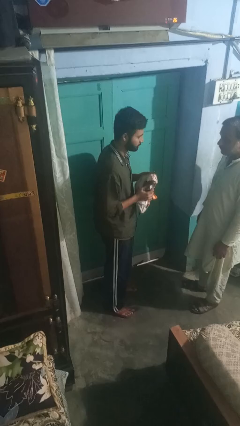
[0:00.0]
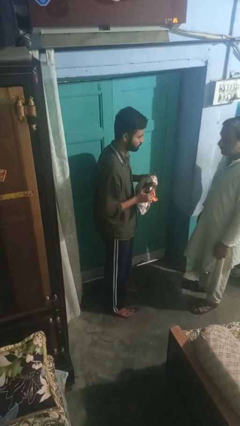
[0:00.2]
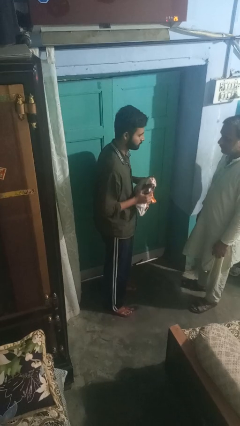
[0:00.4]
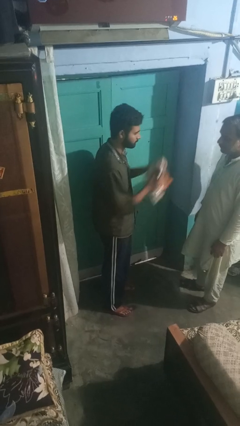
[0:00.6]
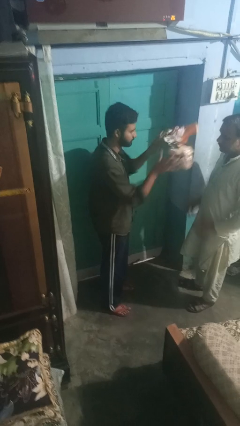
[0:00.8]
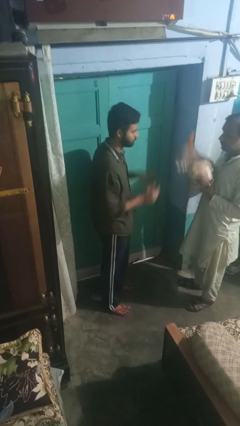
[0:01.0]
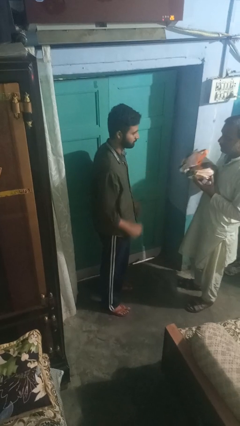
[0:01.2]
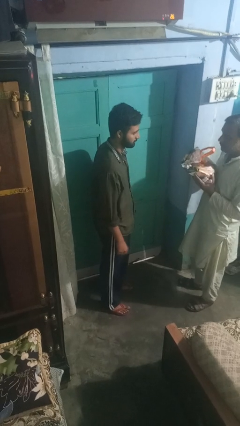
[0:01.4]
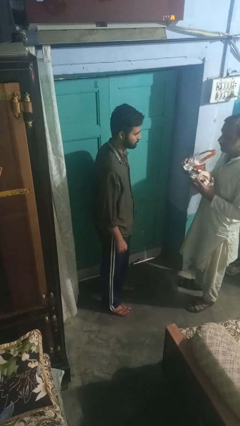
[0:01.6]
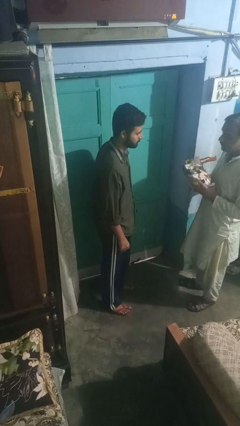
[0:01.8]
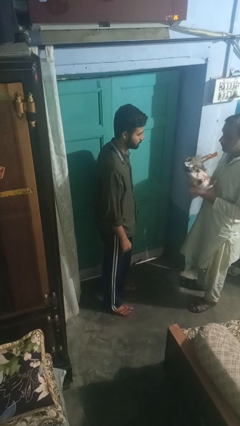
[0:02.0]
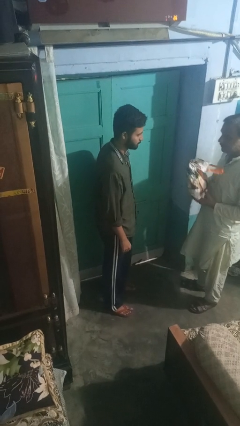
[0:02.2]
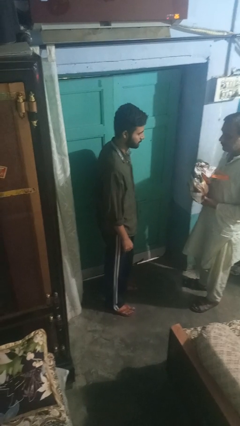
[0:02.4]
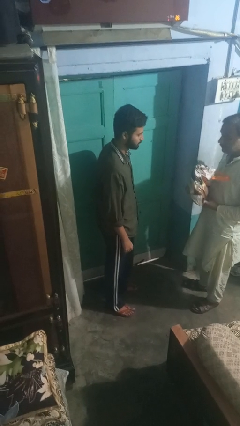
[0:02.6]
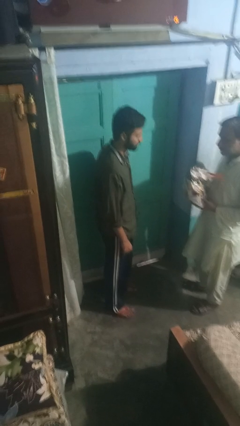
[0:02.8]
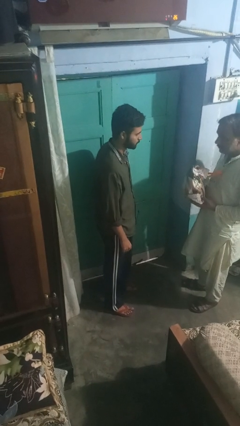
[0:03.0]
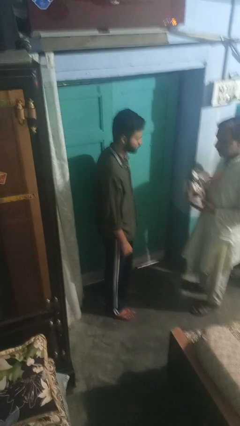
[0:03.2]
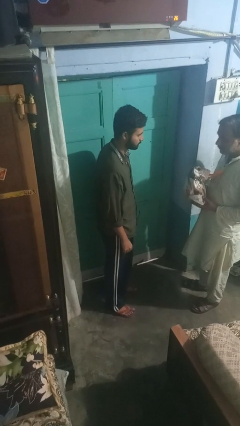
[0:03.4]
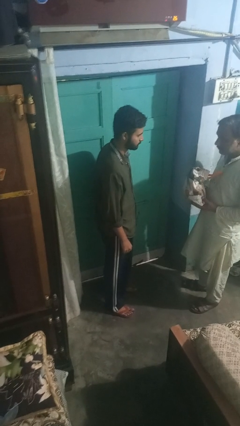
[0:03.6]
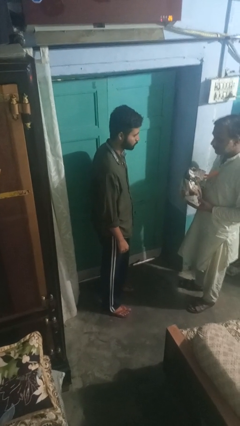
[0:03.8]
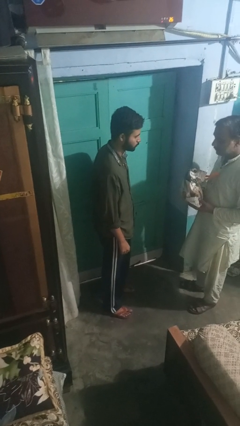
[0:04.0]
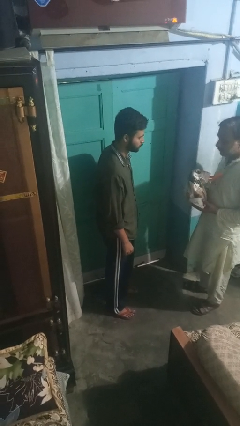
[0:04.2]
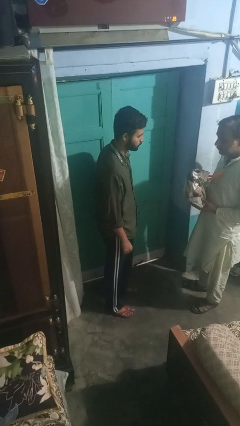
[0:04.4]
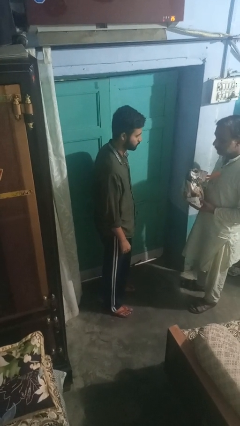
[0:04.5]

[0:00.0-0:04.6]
person throws object to person

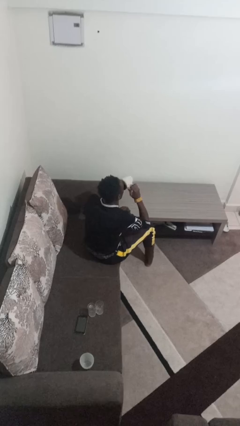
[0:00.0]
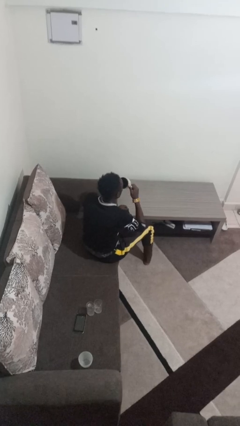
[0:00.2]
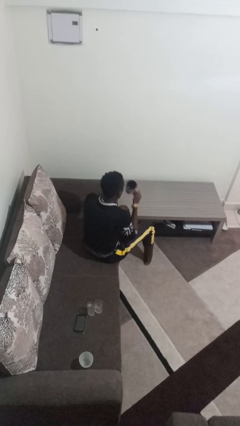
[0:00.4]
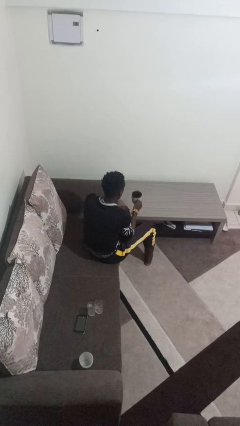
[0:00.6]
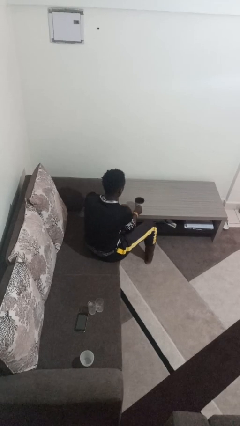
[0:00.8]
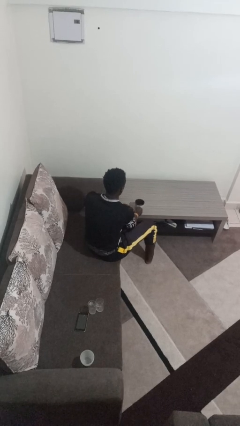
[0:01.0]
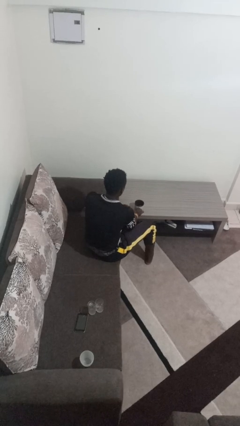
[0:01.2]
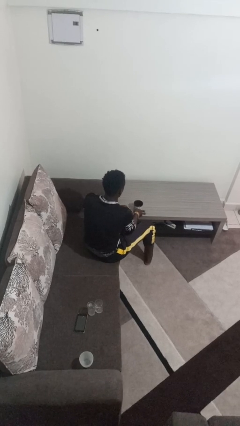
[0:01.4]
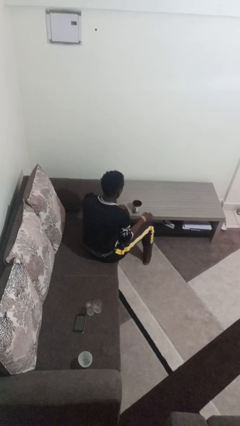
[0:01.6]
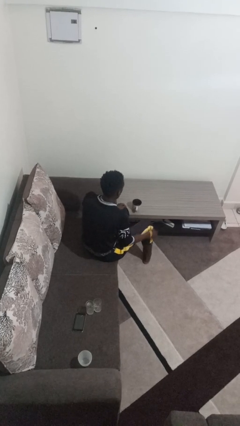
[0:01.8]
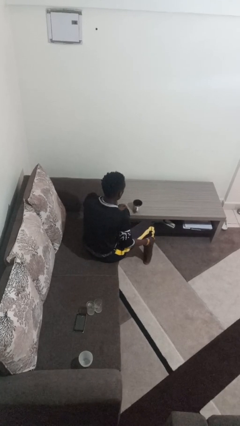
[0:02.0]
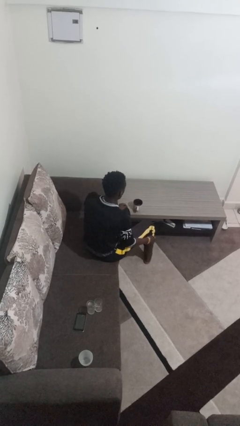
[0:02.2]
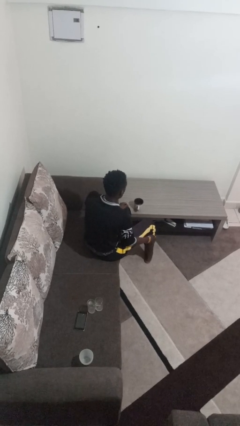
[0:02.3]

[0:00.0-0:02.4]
person puts down object on table

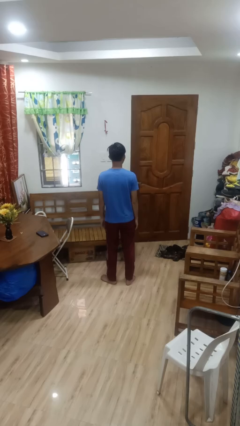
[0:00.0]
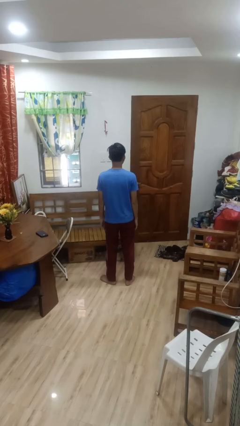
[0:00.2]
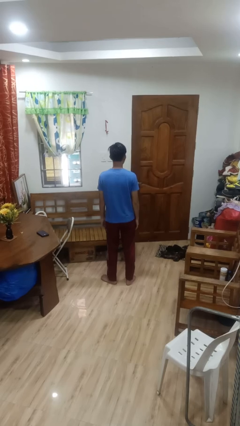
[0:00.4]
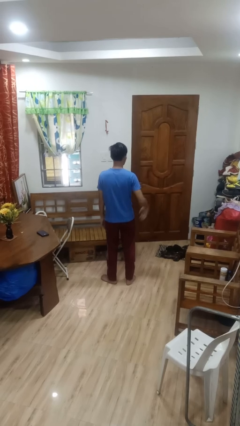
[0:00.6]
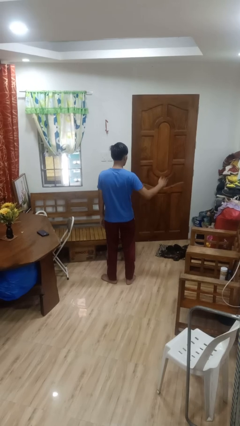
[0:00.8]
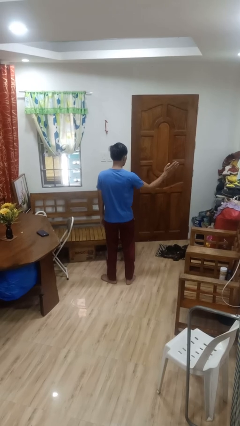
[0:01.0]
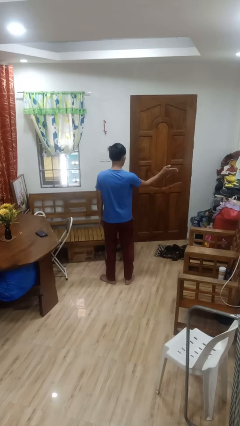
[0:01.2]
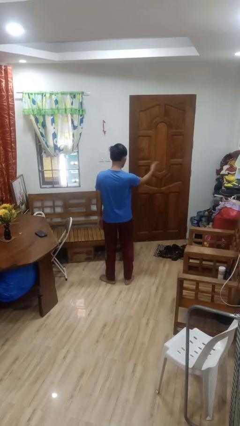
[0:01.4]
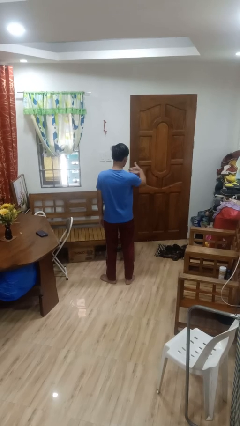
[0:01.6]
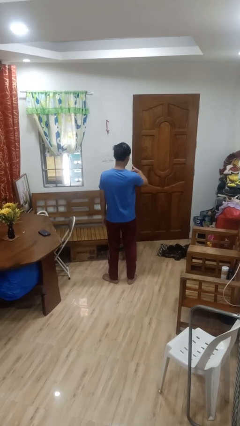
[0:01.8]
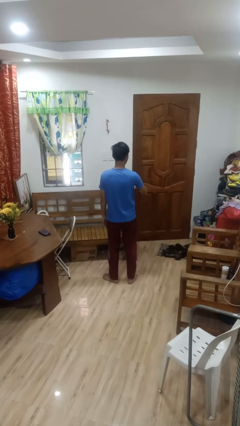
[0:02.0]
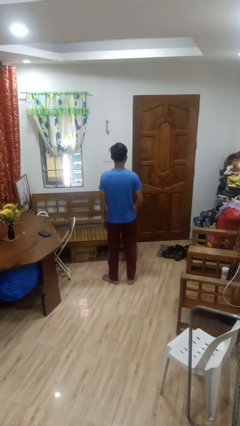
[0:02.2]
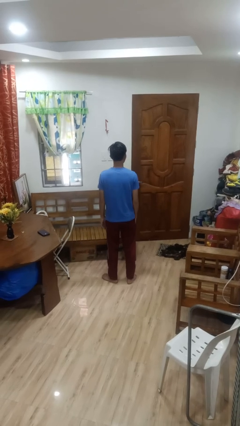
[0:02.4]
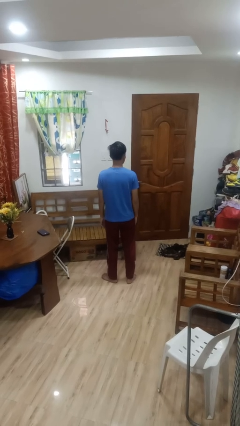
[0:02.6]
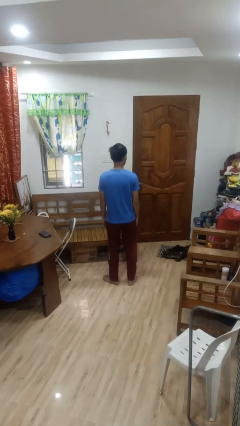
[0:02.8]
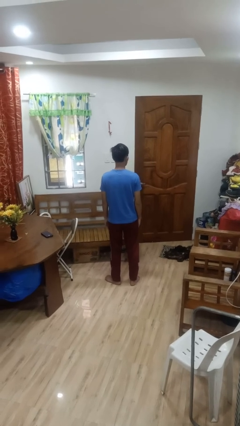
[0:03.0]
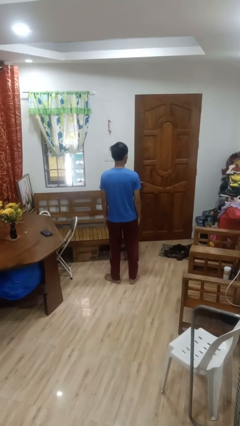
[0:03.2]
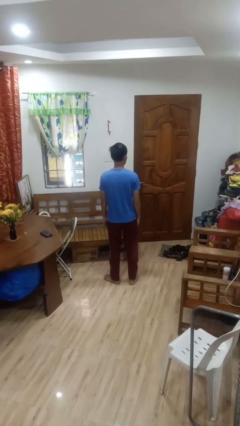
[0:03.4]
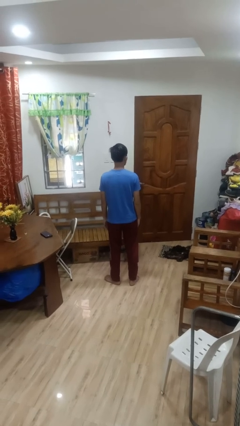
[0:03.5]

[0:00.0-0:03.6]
person gestures swipe left

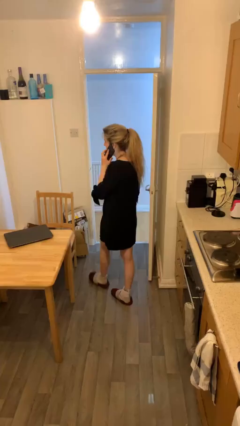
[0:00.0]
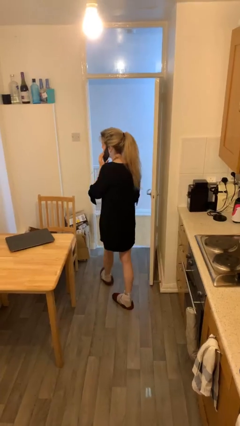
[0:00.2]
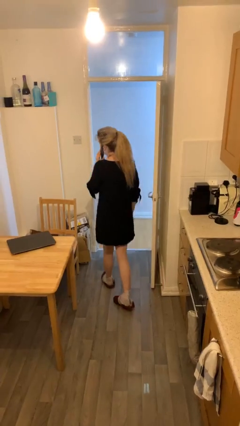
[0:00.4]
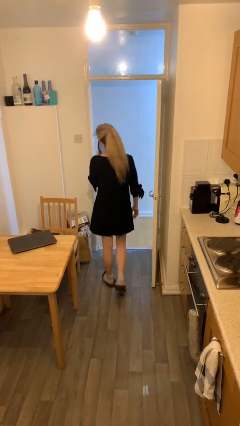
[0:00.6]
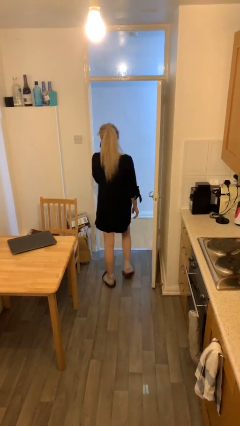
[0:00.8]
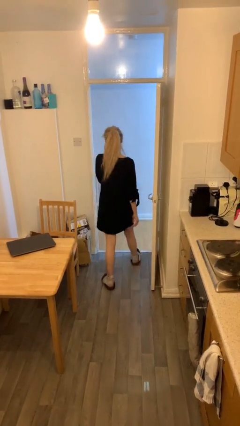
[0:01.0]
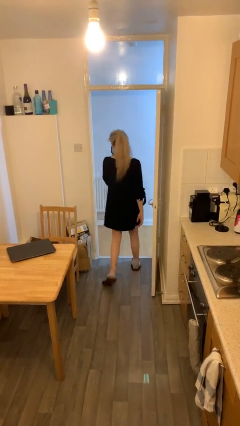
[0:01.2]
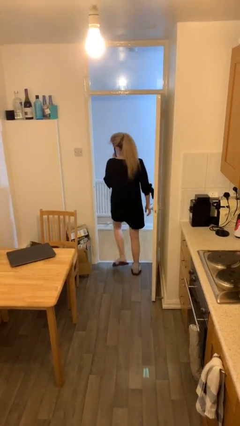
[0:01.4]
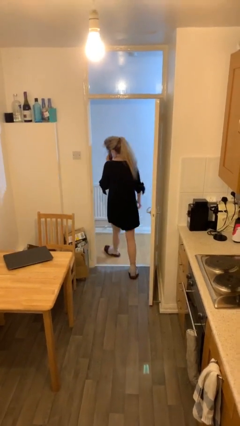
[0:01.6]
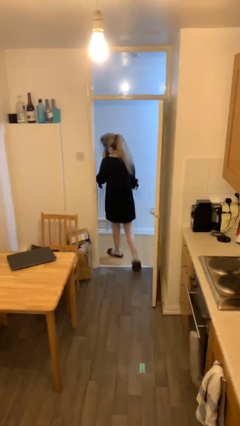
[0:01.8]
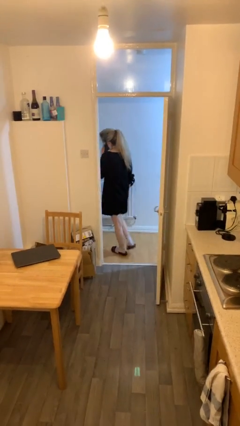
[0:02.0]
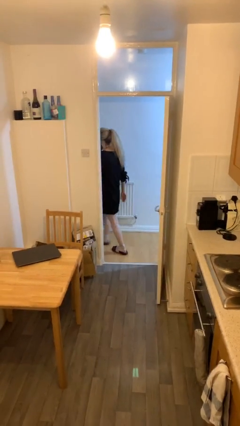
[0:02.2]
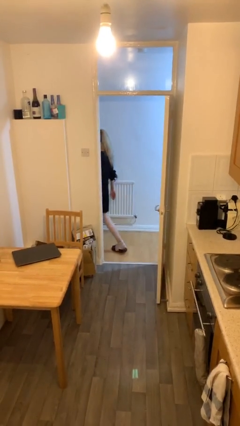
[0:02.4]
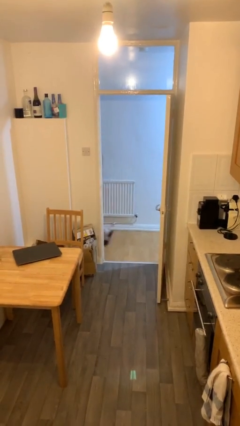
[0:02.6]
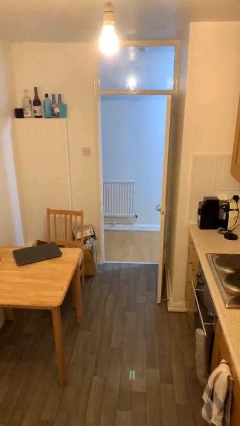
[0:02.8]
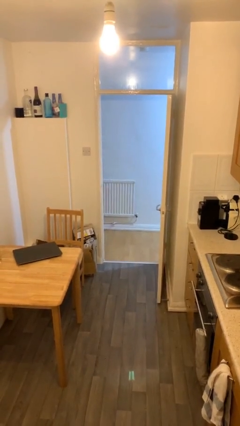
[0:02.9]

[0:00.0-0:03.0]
person exits scene through structure

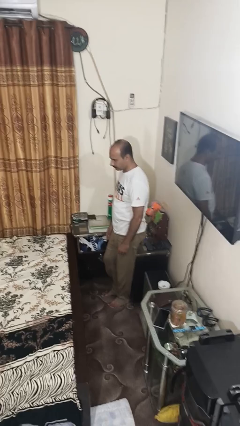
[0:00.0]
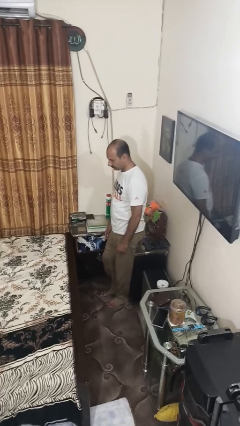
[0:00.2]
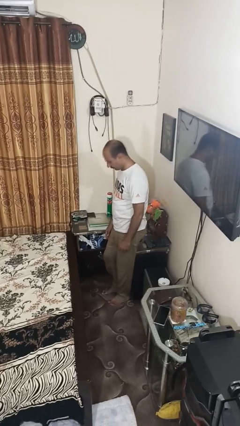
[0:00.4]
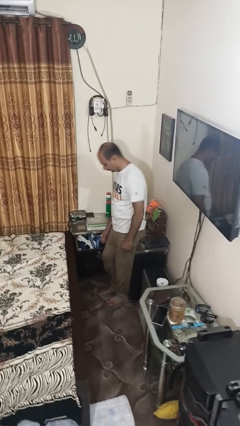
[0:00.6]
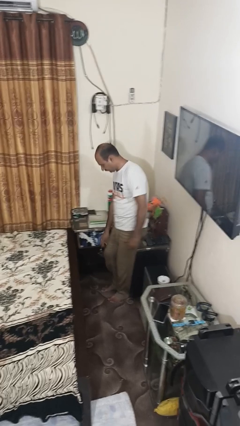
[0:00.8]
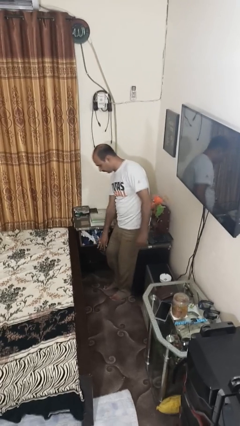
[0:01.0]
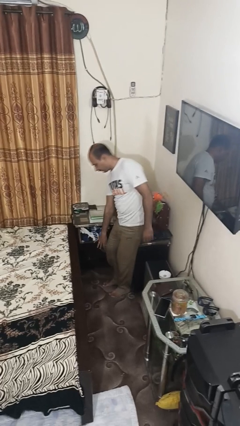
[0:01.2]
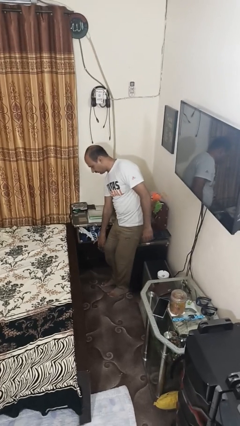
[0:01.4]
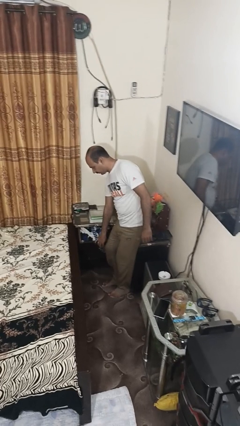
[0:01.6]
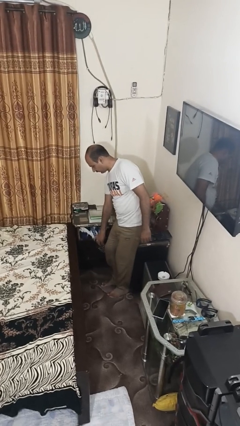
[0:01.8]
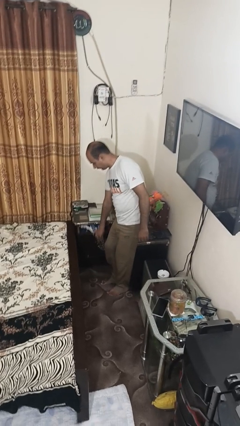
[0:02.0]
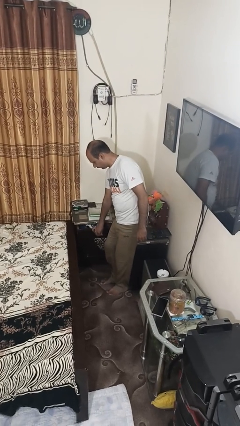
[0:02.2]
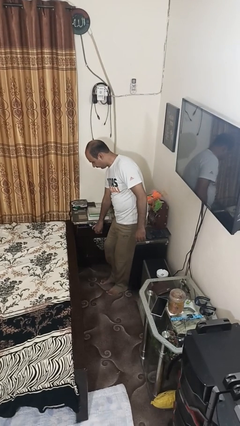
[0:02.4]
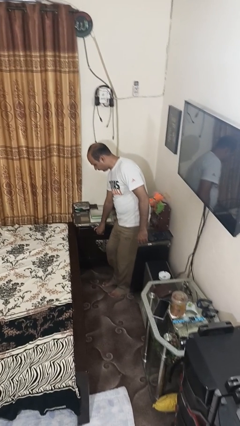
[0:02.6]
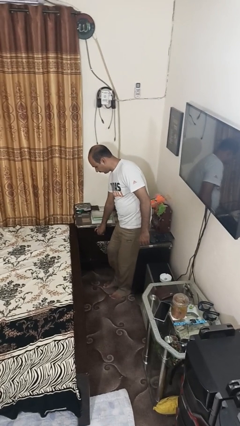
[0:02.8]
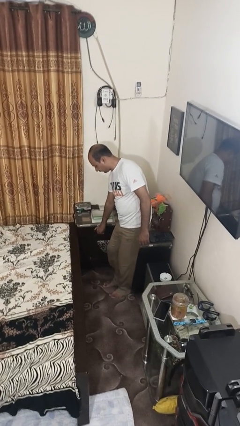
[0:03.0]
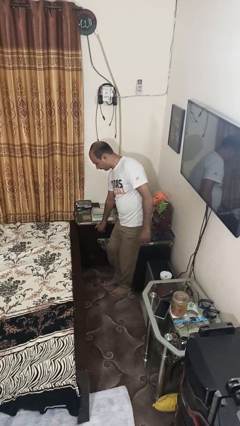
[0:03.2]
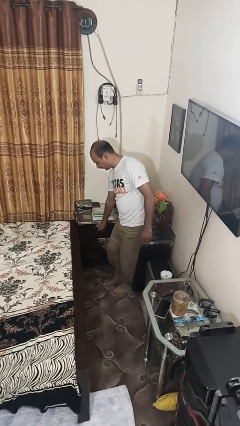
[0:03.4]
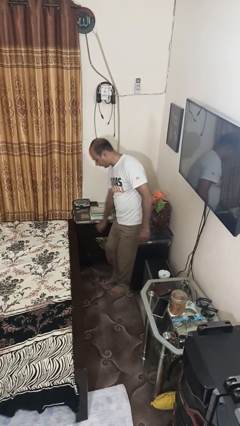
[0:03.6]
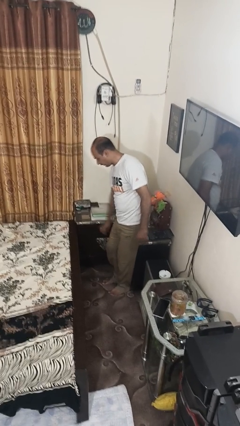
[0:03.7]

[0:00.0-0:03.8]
person closes dresser drawer
